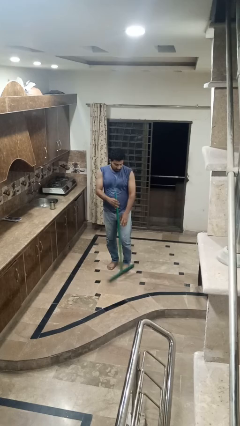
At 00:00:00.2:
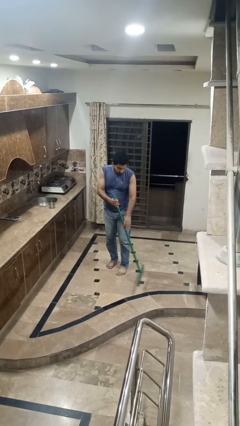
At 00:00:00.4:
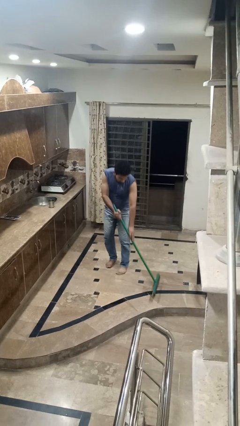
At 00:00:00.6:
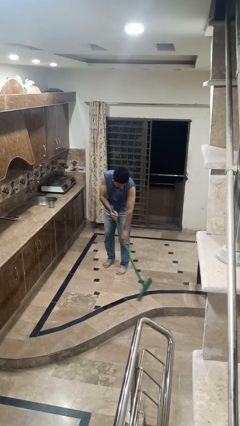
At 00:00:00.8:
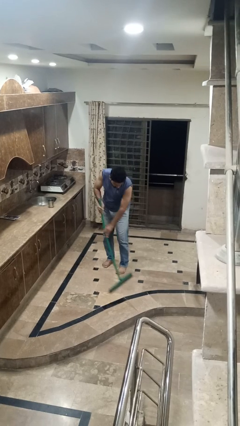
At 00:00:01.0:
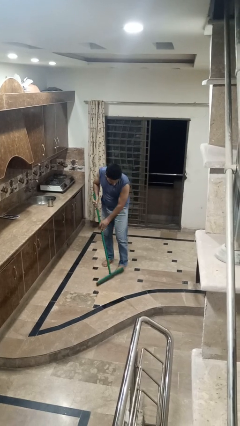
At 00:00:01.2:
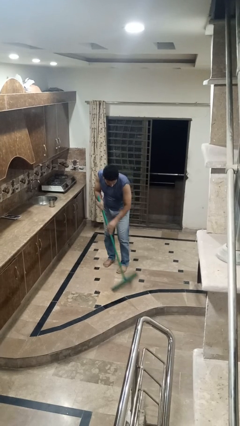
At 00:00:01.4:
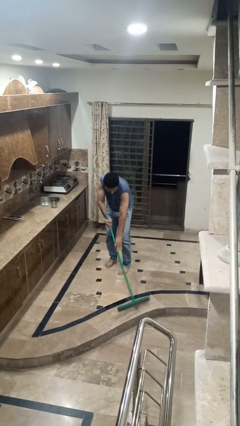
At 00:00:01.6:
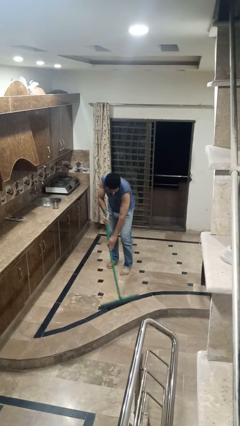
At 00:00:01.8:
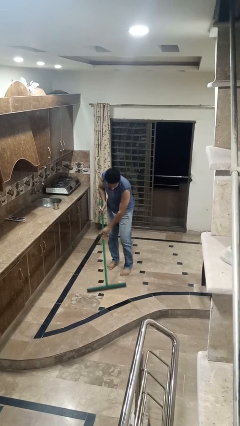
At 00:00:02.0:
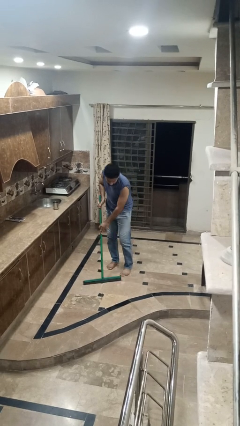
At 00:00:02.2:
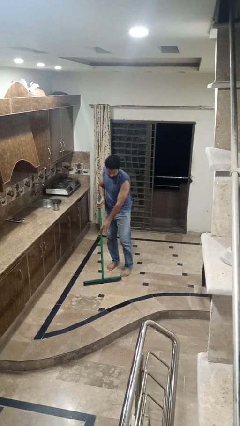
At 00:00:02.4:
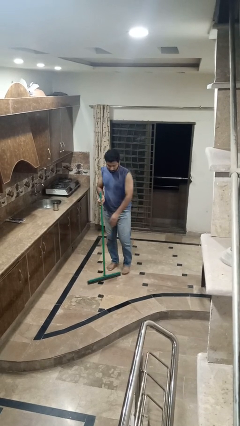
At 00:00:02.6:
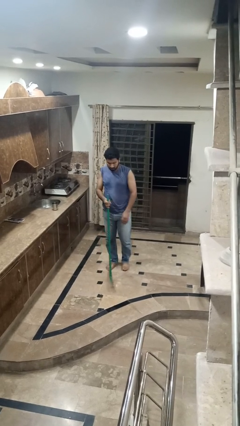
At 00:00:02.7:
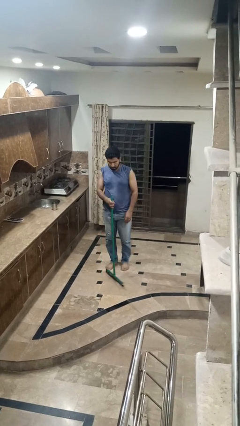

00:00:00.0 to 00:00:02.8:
person mops

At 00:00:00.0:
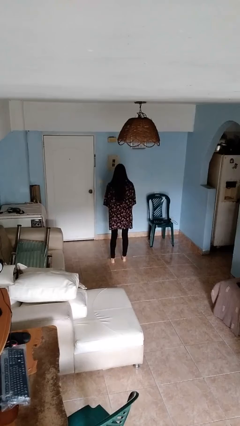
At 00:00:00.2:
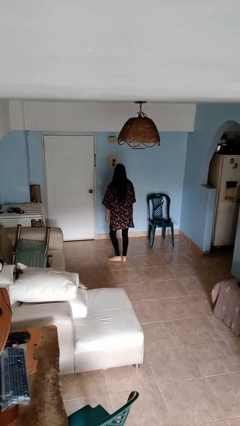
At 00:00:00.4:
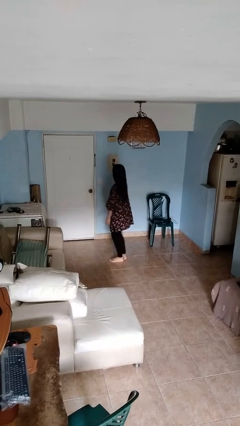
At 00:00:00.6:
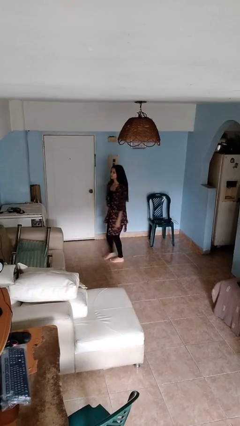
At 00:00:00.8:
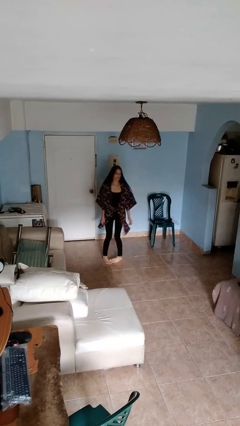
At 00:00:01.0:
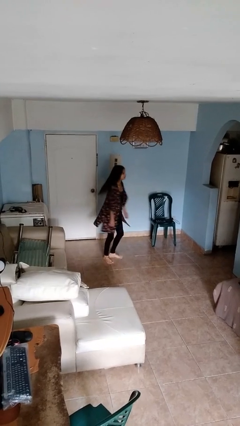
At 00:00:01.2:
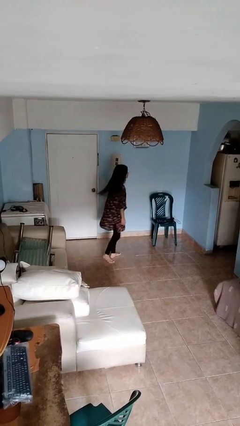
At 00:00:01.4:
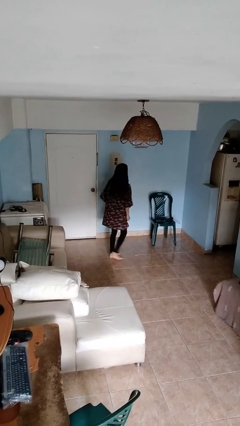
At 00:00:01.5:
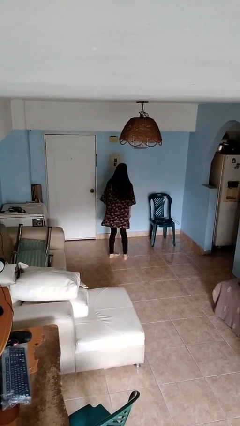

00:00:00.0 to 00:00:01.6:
person twirls

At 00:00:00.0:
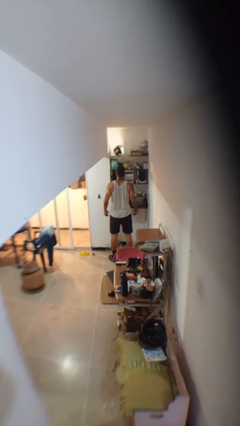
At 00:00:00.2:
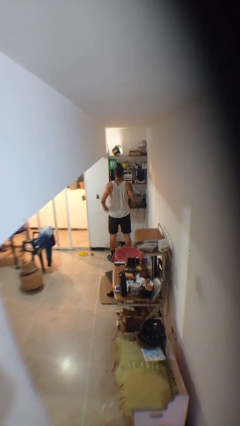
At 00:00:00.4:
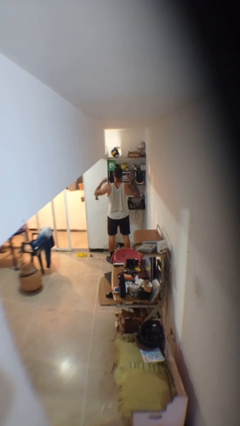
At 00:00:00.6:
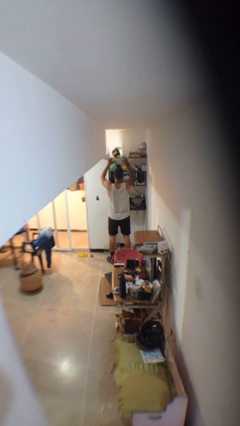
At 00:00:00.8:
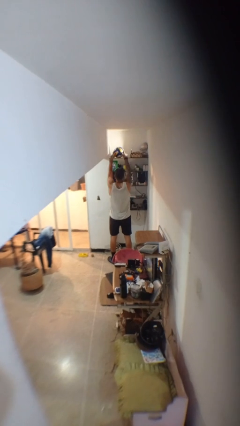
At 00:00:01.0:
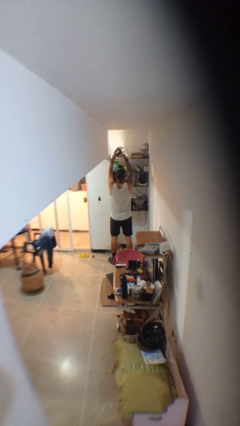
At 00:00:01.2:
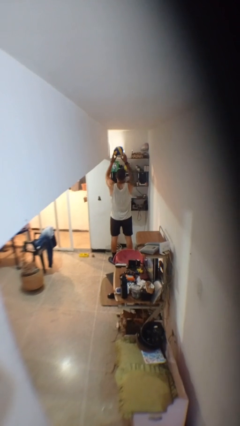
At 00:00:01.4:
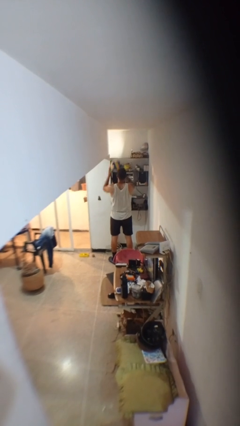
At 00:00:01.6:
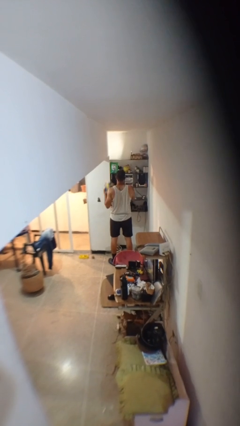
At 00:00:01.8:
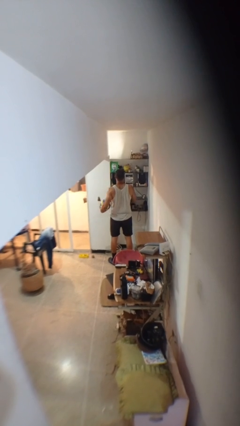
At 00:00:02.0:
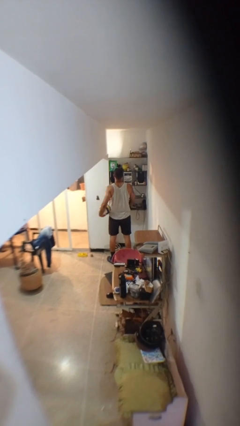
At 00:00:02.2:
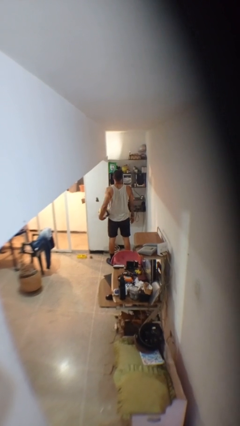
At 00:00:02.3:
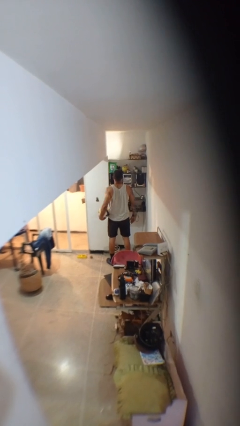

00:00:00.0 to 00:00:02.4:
person picks up object from shelf

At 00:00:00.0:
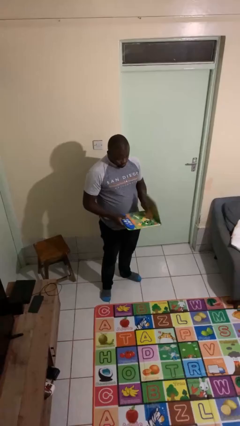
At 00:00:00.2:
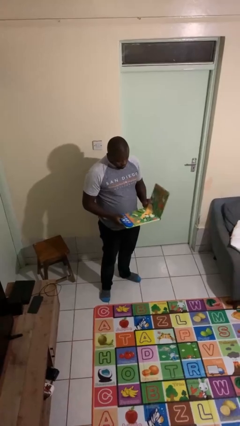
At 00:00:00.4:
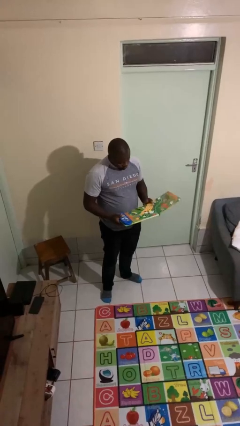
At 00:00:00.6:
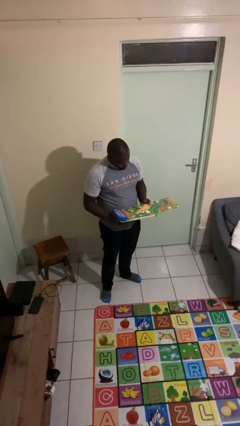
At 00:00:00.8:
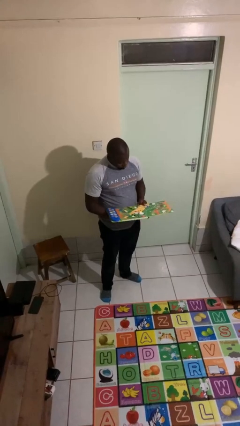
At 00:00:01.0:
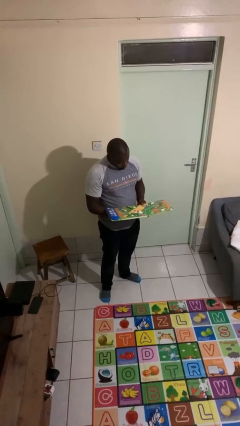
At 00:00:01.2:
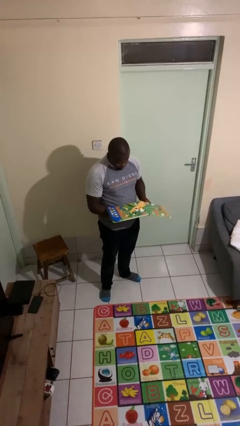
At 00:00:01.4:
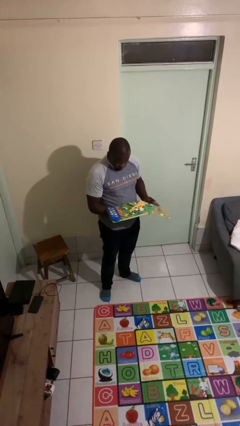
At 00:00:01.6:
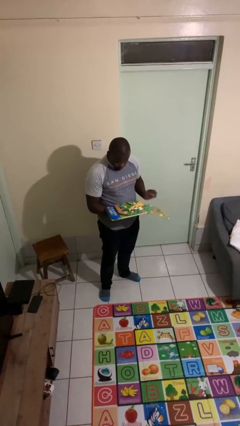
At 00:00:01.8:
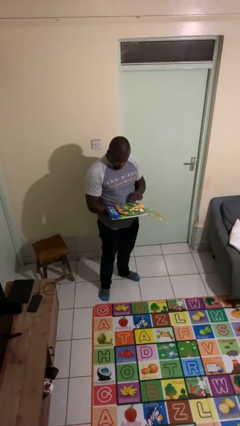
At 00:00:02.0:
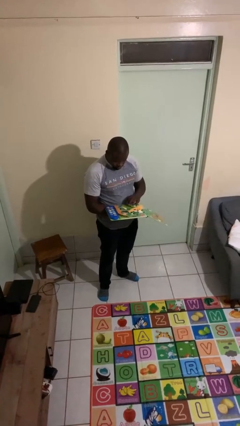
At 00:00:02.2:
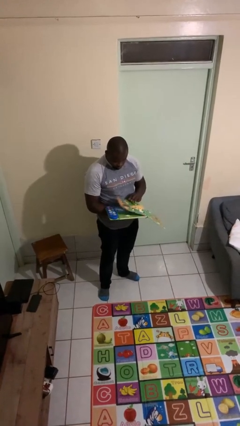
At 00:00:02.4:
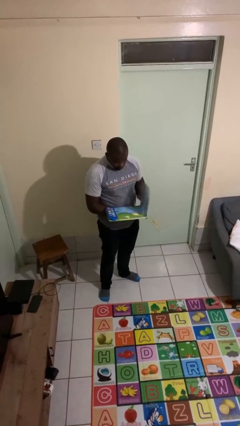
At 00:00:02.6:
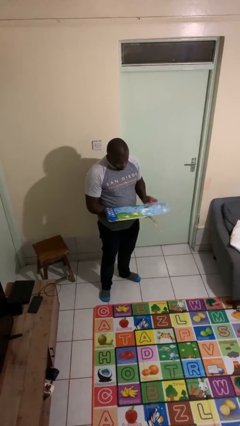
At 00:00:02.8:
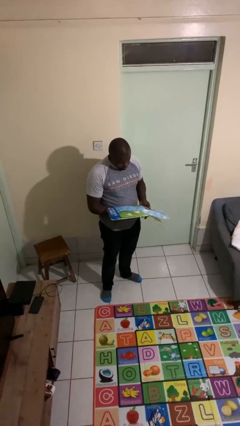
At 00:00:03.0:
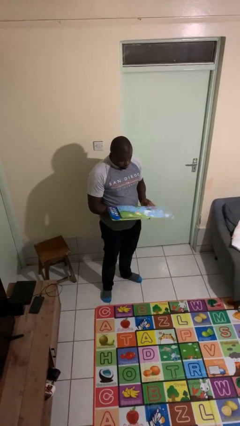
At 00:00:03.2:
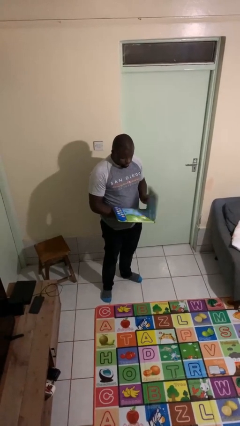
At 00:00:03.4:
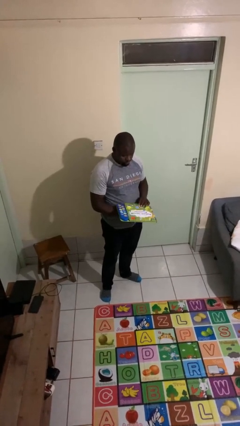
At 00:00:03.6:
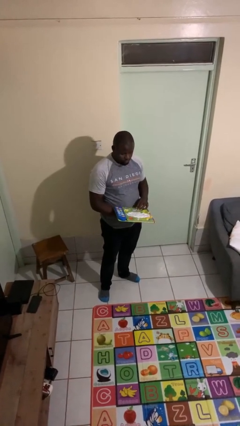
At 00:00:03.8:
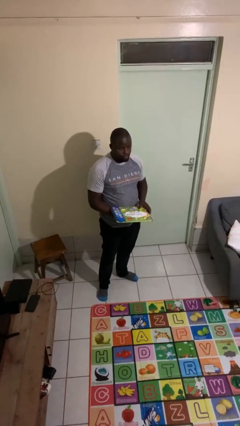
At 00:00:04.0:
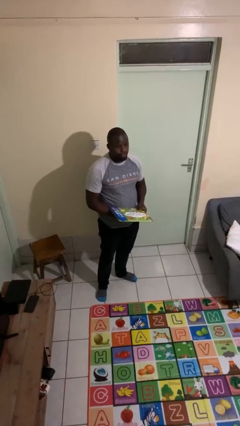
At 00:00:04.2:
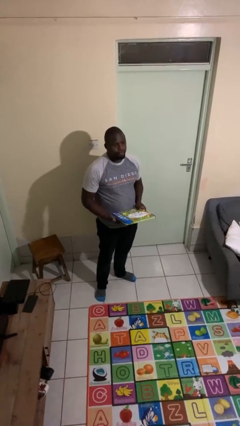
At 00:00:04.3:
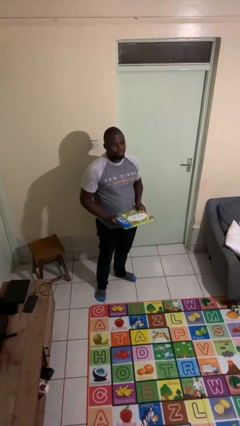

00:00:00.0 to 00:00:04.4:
person reads book

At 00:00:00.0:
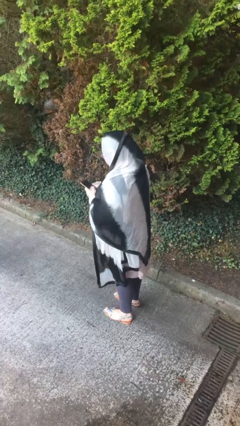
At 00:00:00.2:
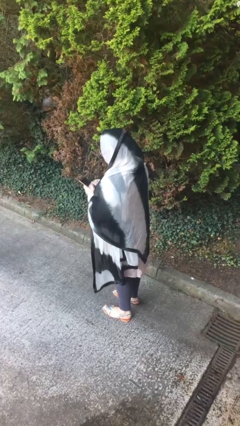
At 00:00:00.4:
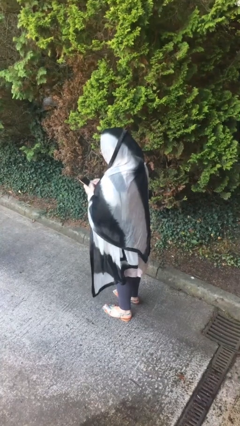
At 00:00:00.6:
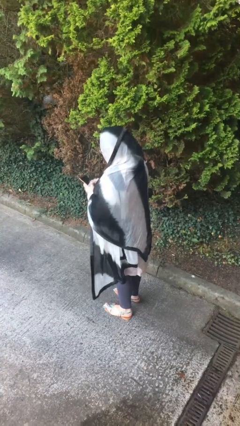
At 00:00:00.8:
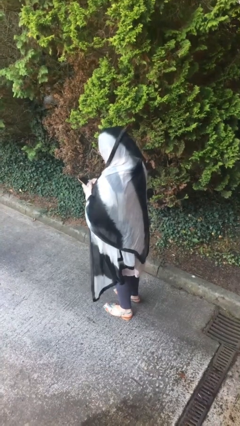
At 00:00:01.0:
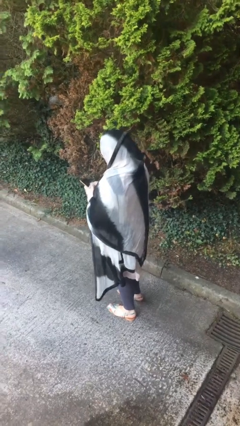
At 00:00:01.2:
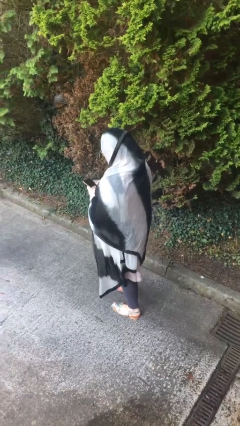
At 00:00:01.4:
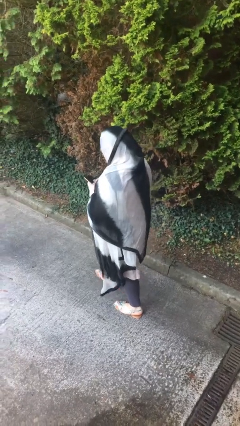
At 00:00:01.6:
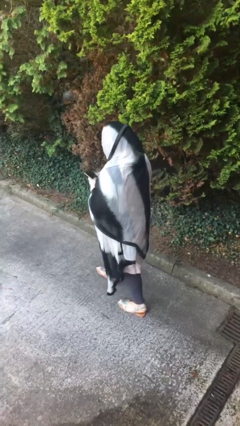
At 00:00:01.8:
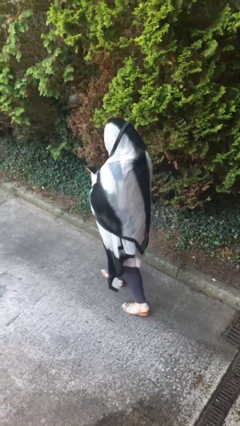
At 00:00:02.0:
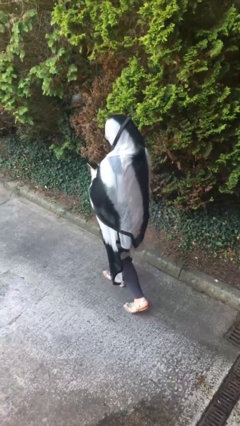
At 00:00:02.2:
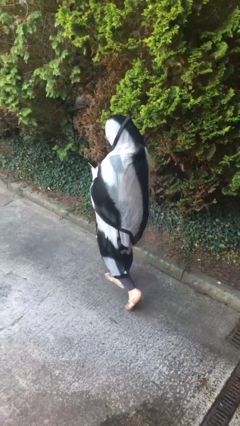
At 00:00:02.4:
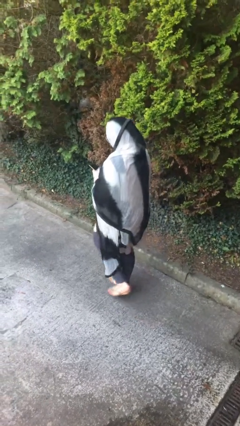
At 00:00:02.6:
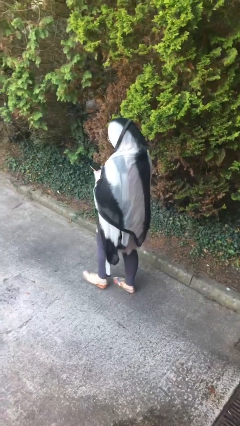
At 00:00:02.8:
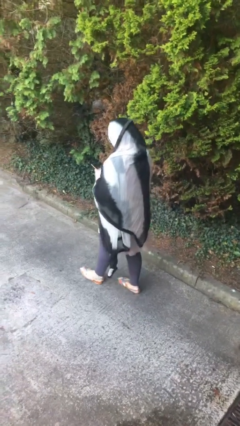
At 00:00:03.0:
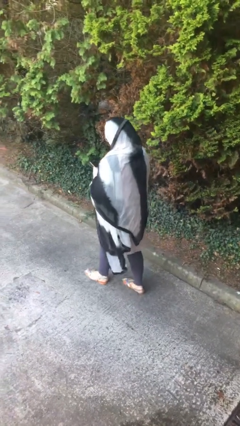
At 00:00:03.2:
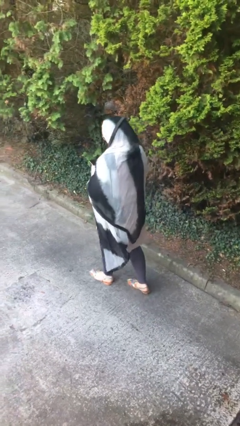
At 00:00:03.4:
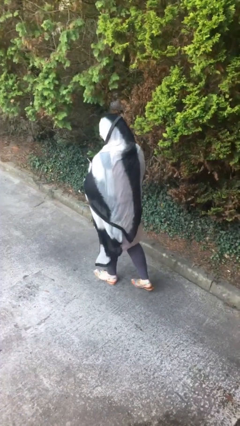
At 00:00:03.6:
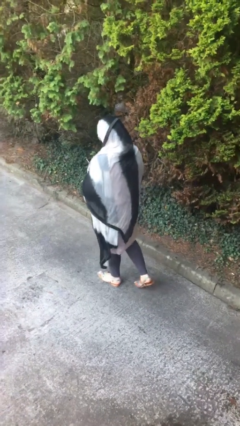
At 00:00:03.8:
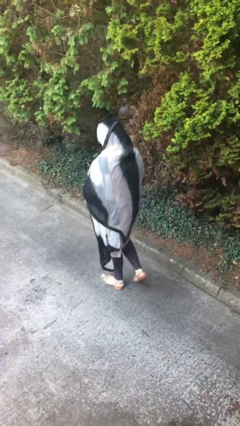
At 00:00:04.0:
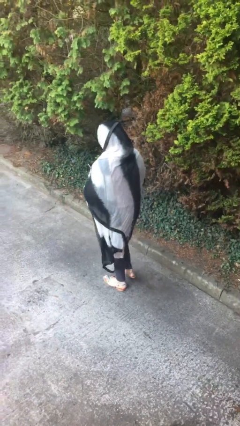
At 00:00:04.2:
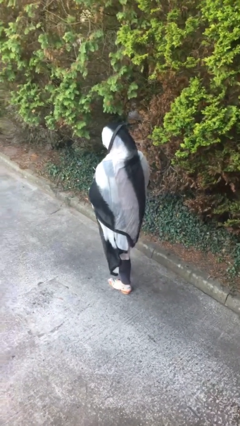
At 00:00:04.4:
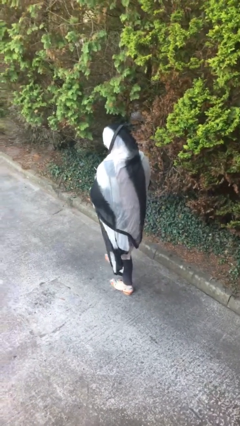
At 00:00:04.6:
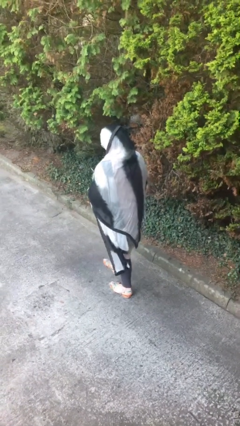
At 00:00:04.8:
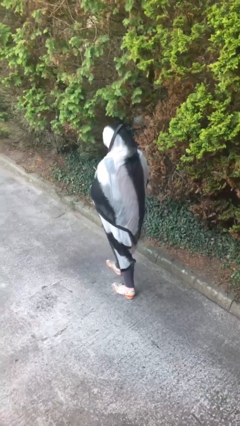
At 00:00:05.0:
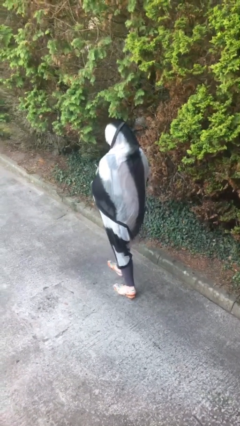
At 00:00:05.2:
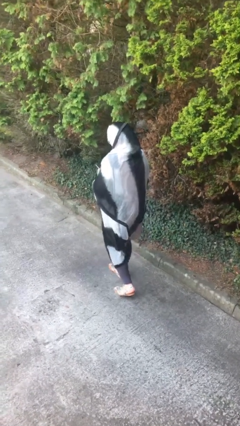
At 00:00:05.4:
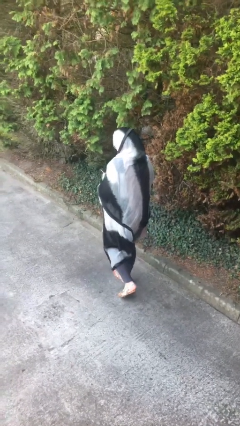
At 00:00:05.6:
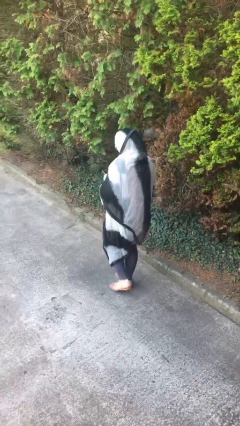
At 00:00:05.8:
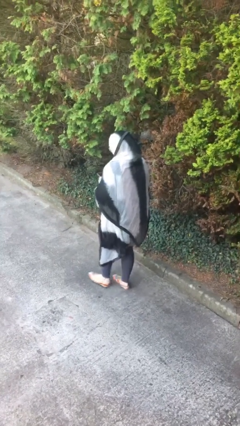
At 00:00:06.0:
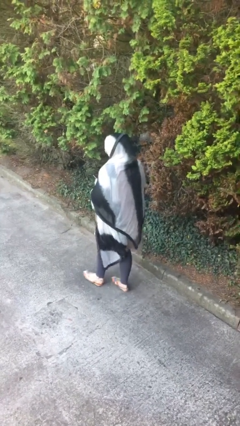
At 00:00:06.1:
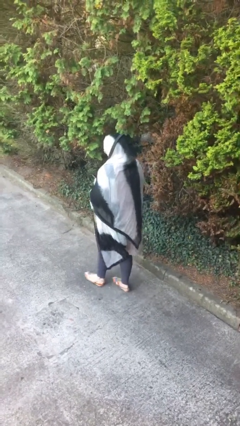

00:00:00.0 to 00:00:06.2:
person texts on phone

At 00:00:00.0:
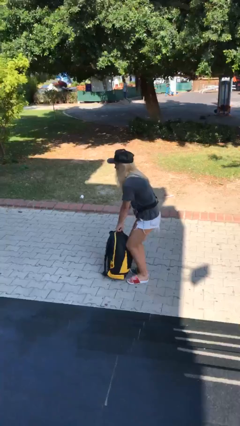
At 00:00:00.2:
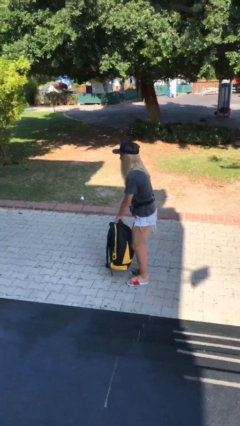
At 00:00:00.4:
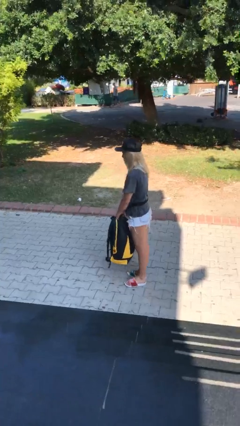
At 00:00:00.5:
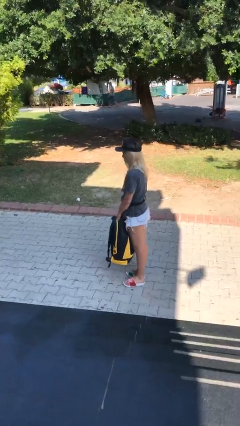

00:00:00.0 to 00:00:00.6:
person picks up object from floor
